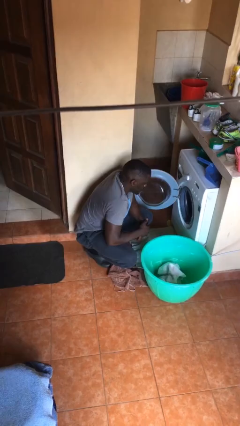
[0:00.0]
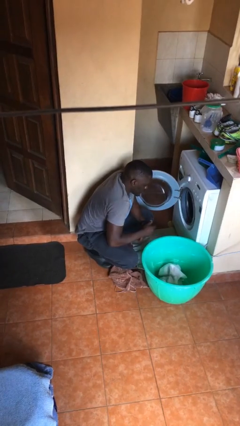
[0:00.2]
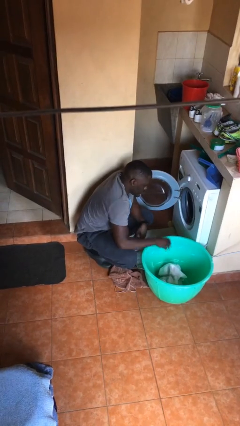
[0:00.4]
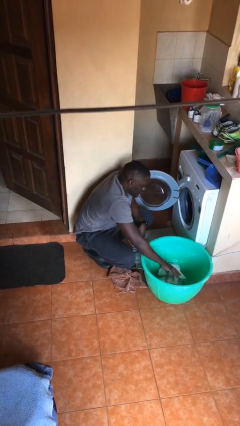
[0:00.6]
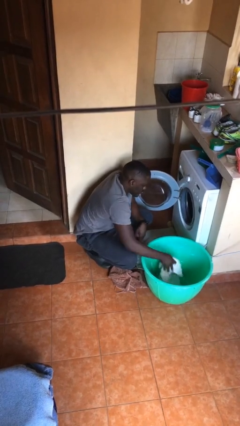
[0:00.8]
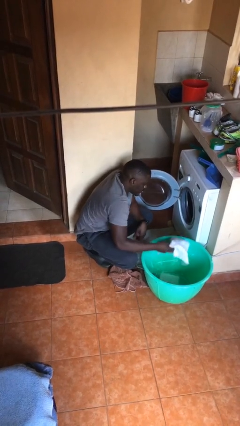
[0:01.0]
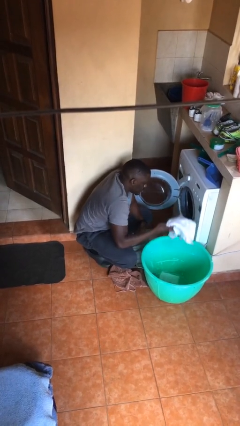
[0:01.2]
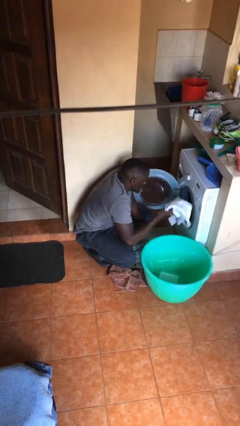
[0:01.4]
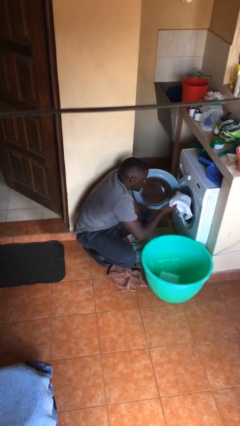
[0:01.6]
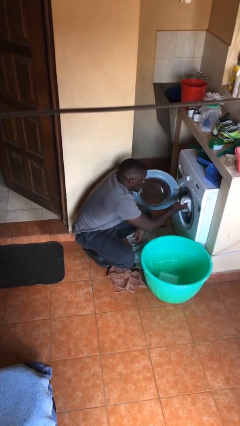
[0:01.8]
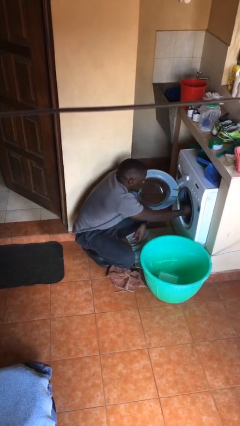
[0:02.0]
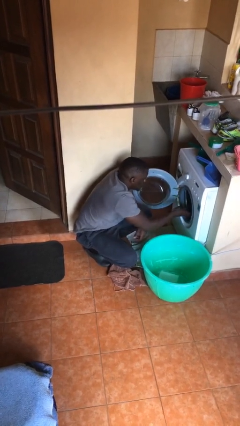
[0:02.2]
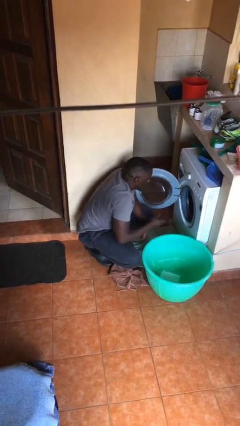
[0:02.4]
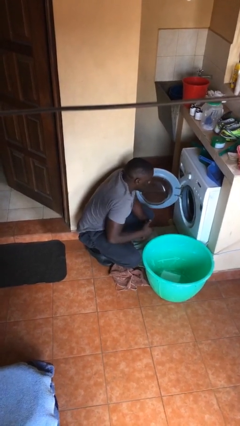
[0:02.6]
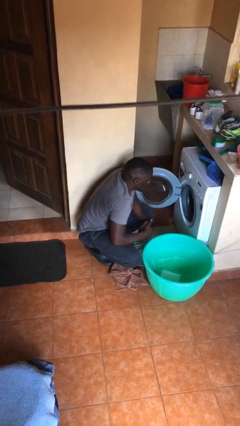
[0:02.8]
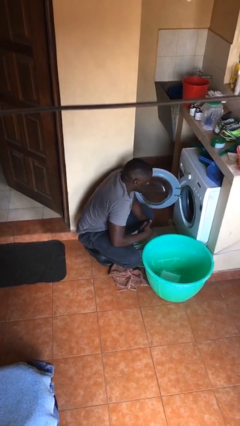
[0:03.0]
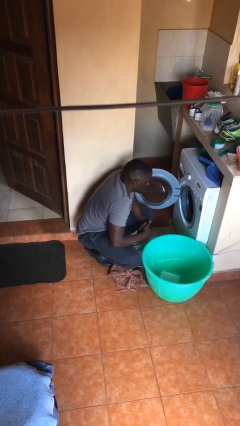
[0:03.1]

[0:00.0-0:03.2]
person loads clotheswasher

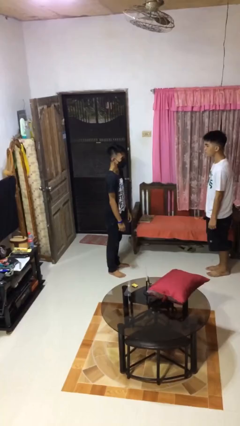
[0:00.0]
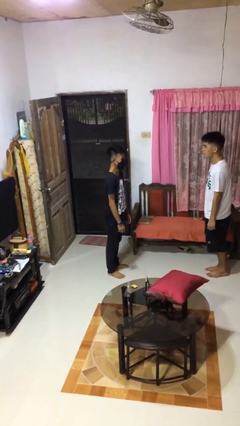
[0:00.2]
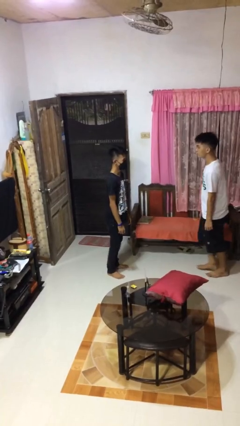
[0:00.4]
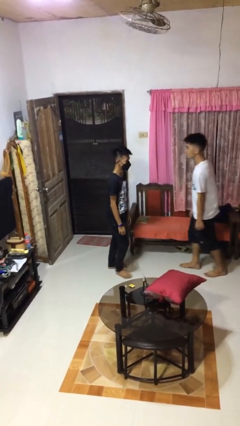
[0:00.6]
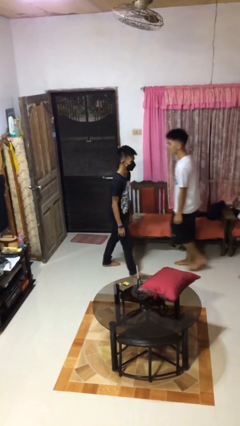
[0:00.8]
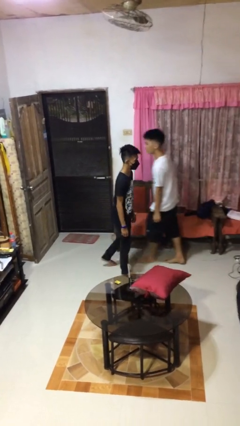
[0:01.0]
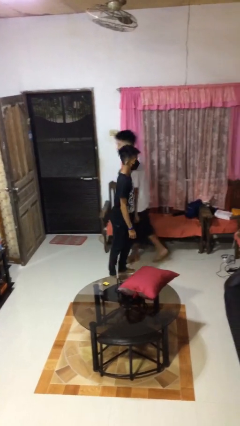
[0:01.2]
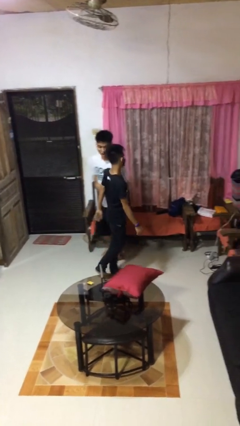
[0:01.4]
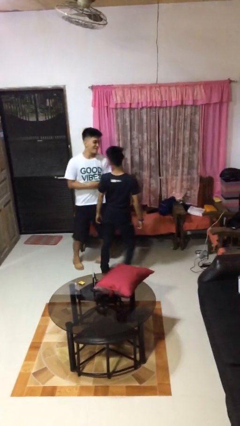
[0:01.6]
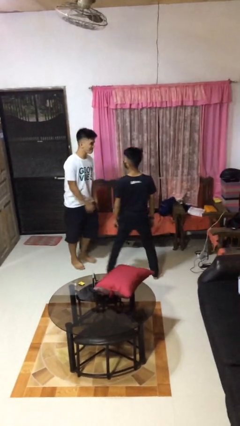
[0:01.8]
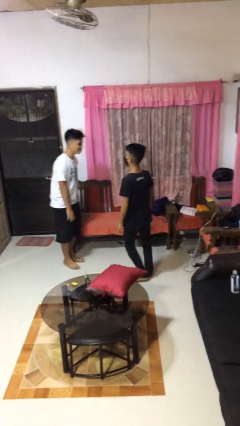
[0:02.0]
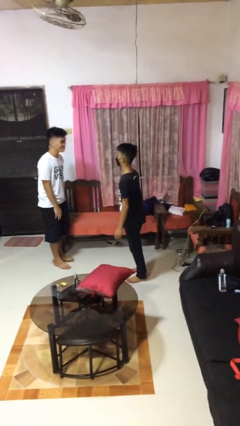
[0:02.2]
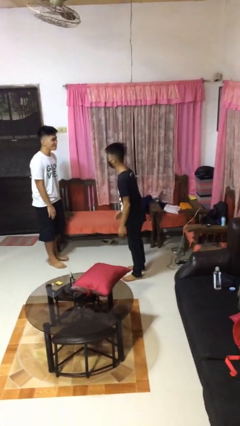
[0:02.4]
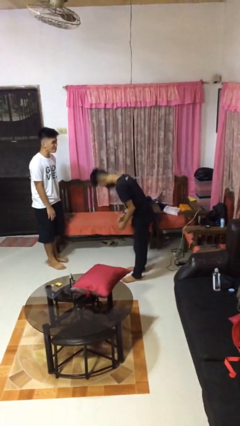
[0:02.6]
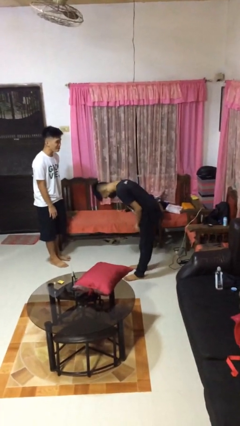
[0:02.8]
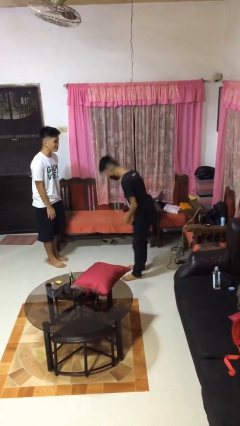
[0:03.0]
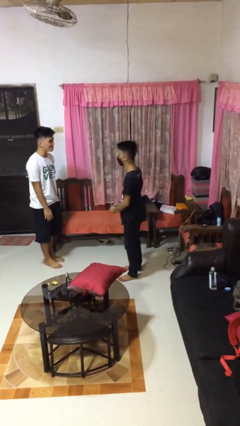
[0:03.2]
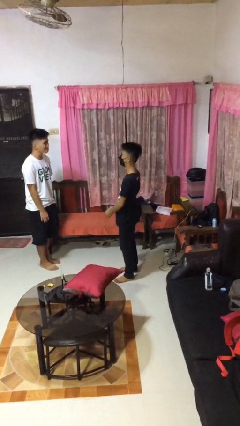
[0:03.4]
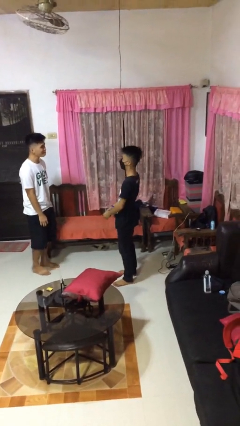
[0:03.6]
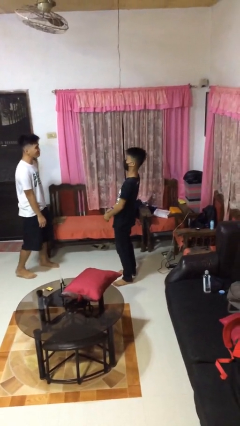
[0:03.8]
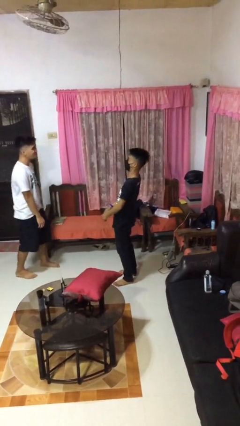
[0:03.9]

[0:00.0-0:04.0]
person bumps into person

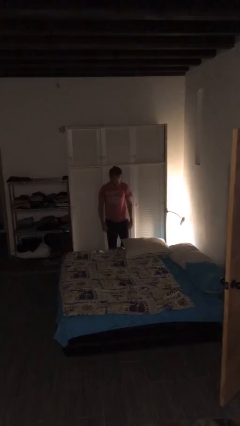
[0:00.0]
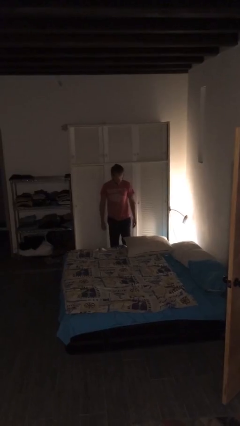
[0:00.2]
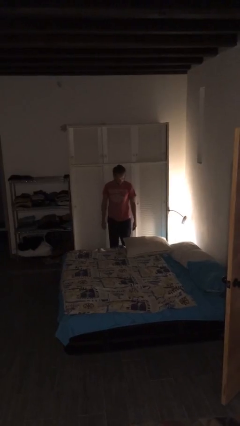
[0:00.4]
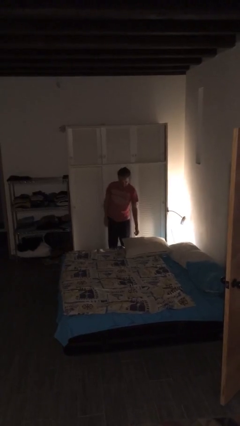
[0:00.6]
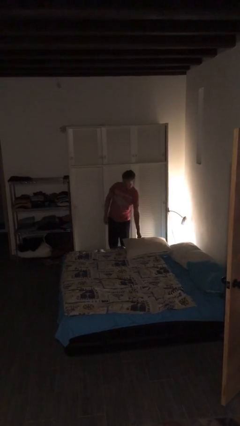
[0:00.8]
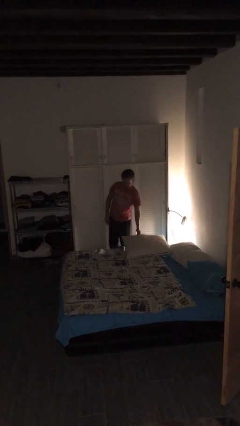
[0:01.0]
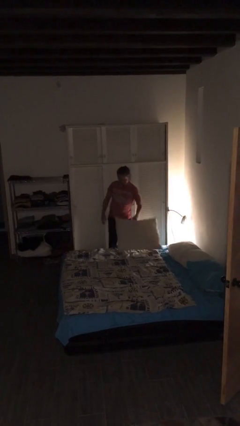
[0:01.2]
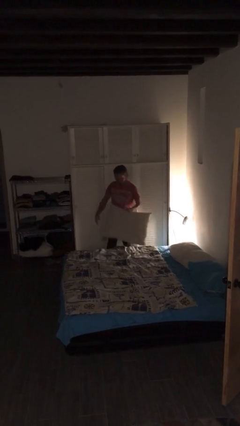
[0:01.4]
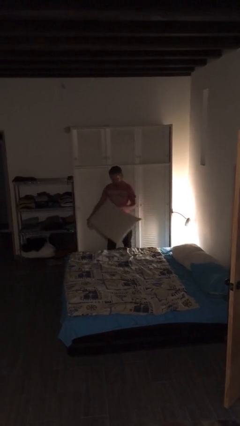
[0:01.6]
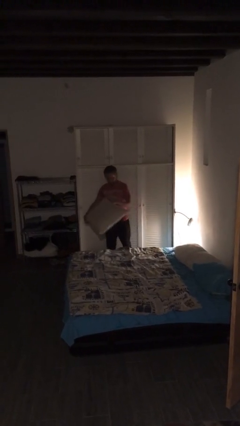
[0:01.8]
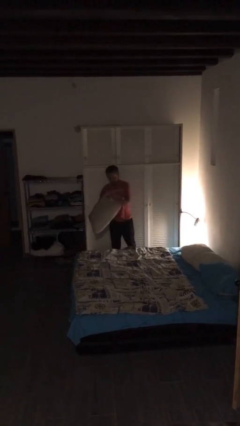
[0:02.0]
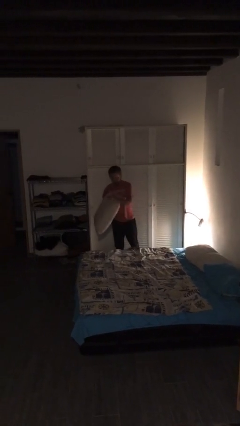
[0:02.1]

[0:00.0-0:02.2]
person picks up object from bed

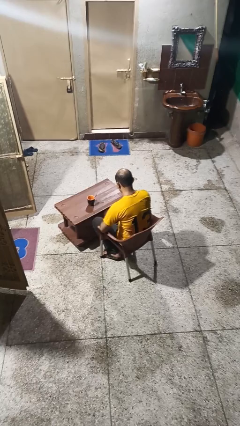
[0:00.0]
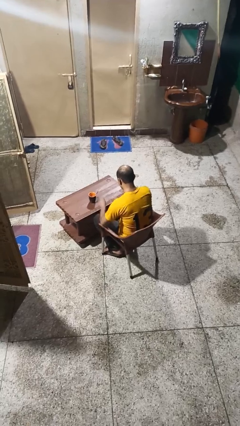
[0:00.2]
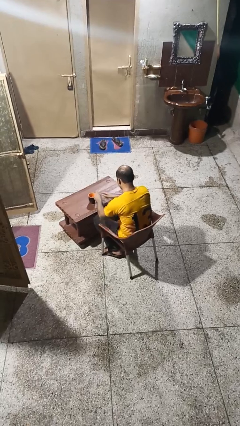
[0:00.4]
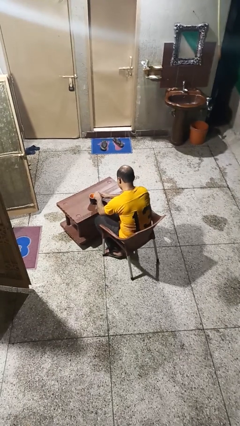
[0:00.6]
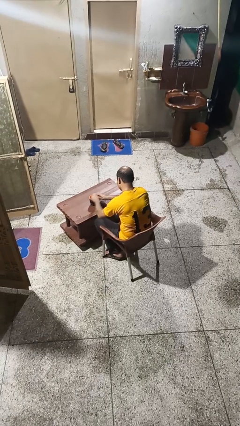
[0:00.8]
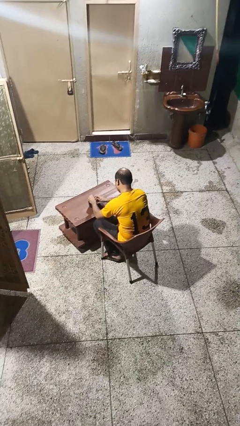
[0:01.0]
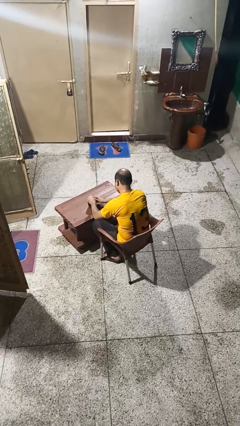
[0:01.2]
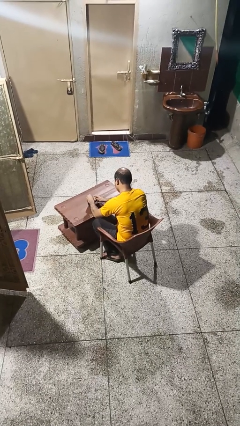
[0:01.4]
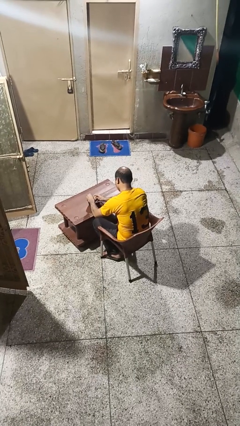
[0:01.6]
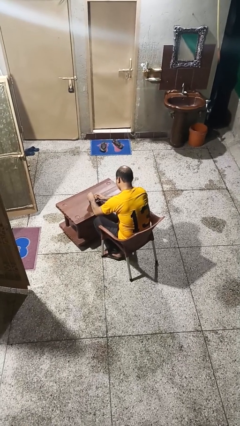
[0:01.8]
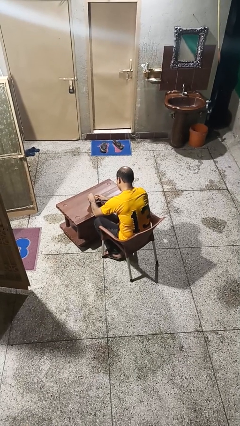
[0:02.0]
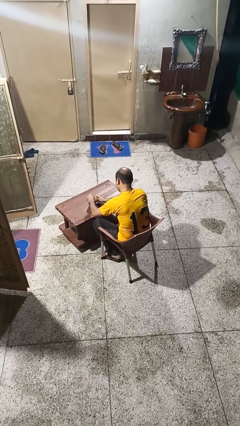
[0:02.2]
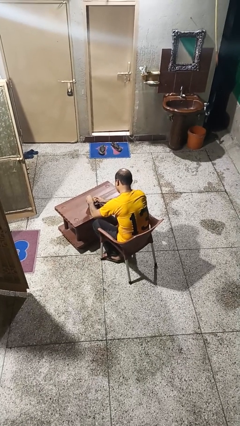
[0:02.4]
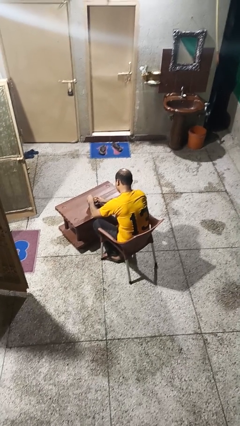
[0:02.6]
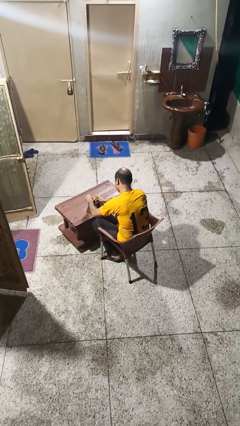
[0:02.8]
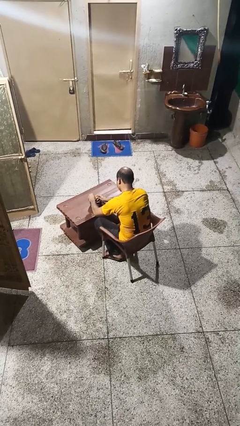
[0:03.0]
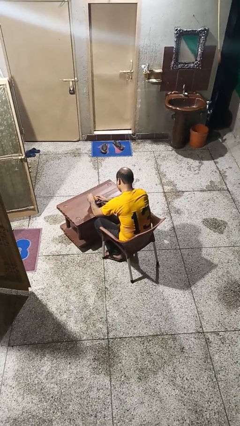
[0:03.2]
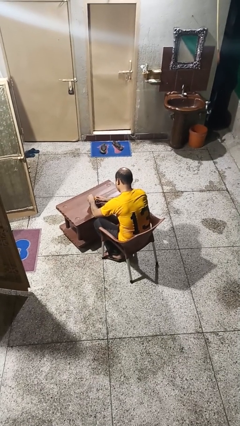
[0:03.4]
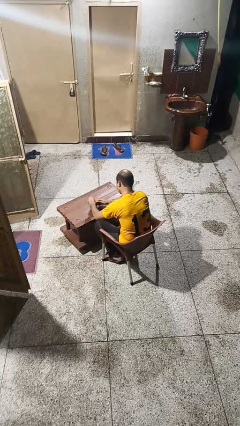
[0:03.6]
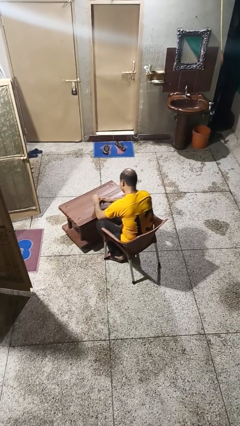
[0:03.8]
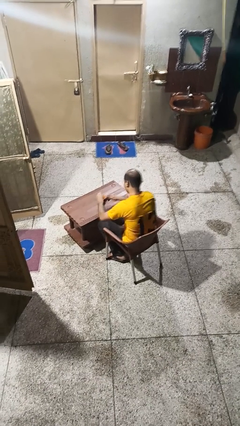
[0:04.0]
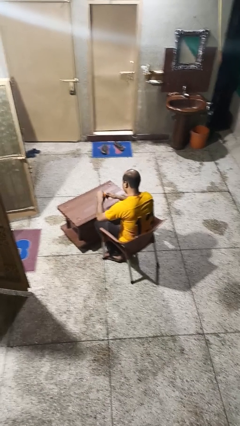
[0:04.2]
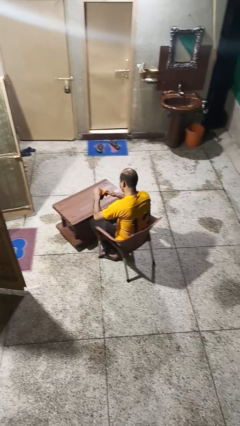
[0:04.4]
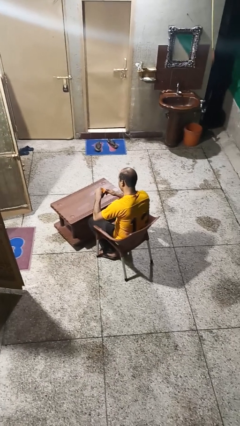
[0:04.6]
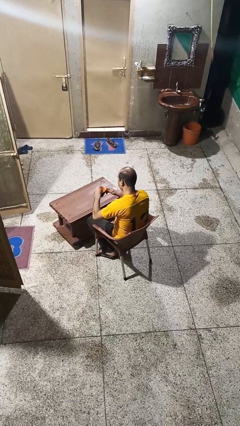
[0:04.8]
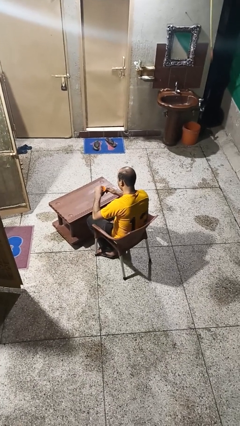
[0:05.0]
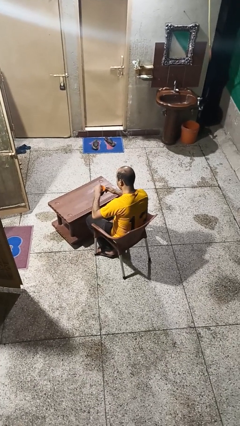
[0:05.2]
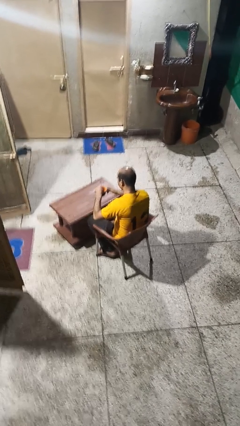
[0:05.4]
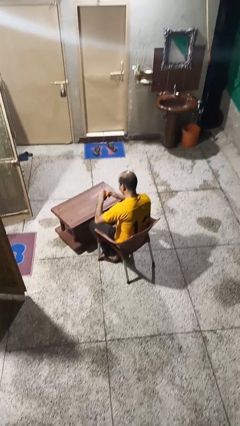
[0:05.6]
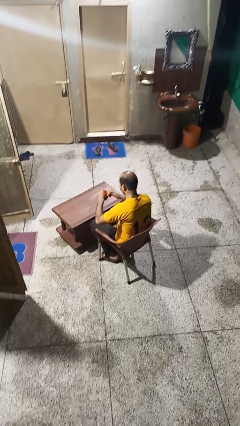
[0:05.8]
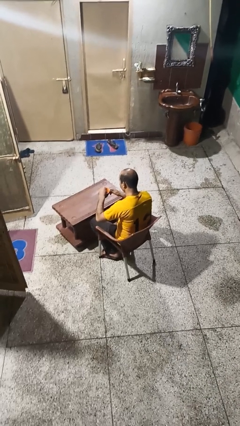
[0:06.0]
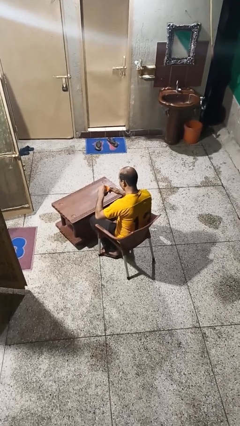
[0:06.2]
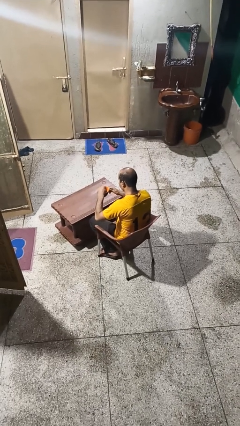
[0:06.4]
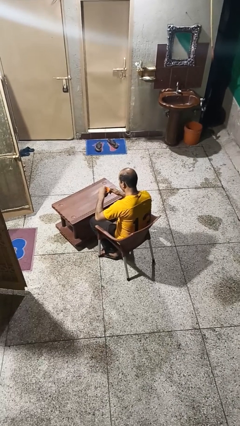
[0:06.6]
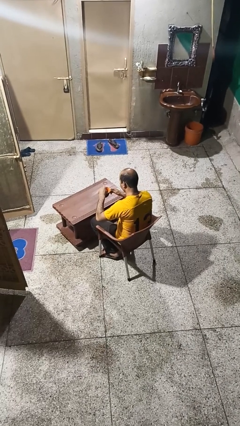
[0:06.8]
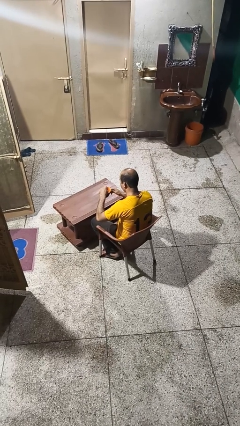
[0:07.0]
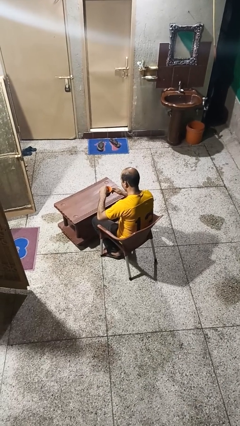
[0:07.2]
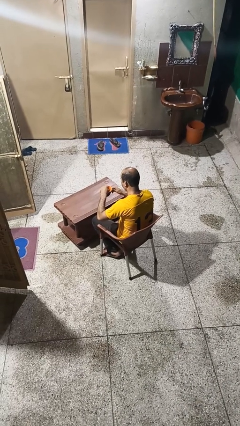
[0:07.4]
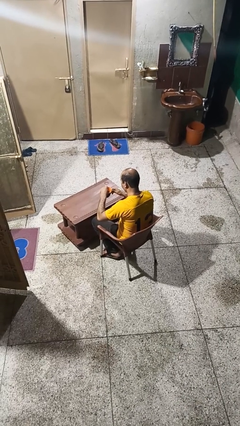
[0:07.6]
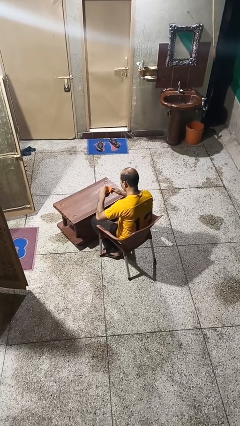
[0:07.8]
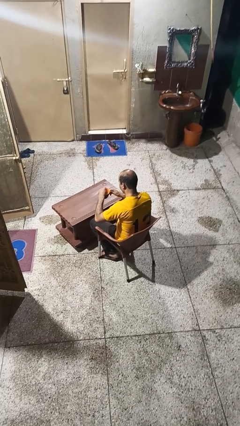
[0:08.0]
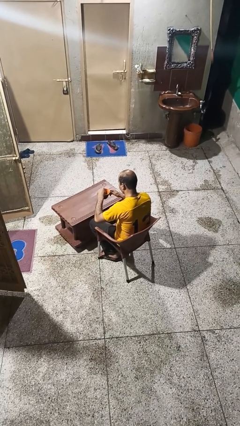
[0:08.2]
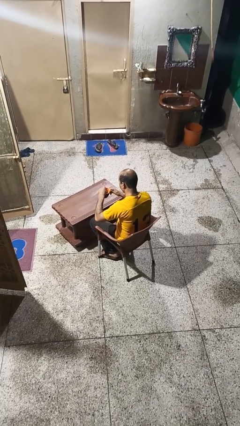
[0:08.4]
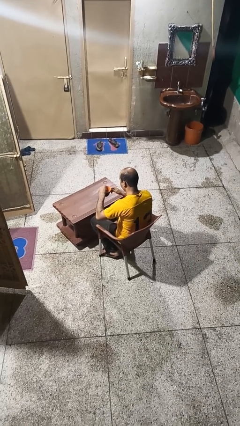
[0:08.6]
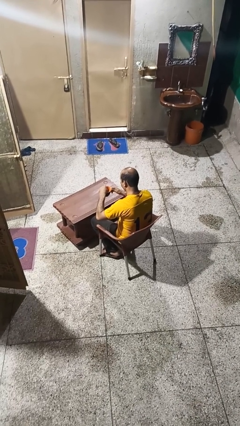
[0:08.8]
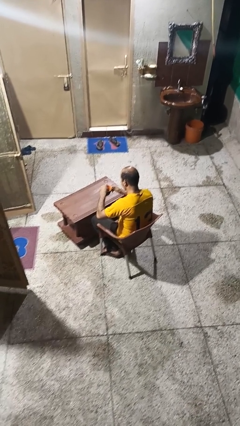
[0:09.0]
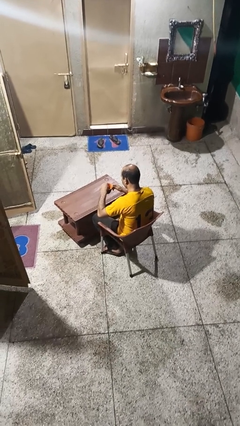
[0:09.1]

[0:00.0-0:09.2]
person stirs mug
